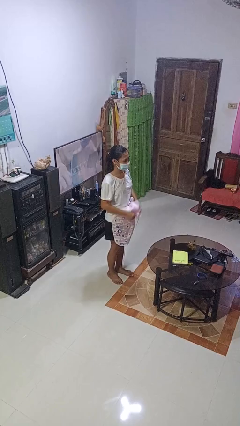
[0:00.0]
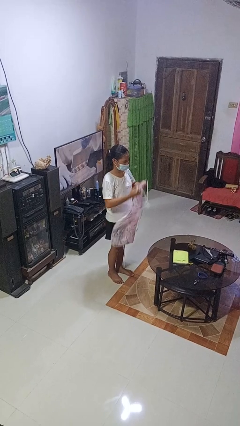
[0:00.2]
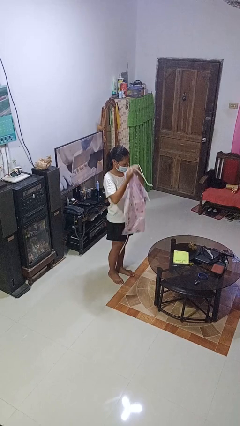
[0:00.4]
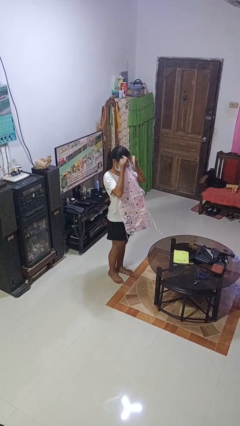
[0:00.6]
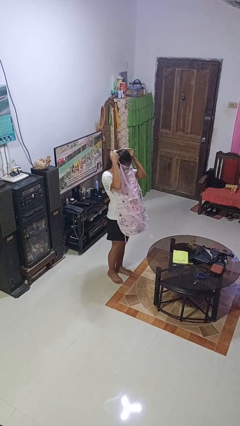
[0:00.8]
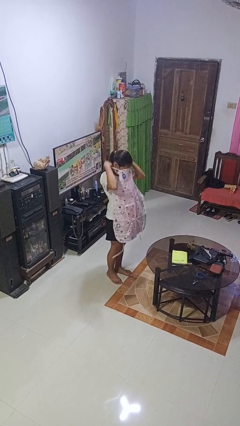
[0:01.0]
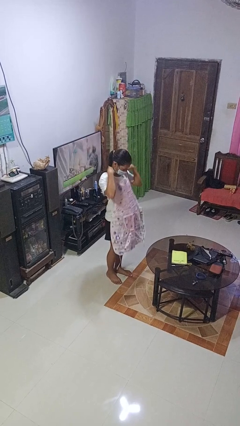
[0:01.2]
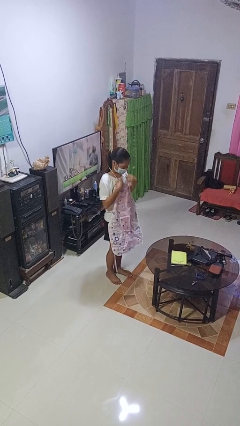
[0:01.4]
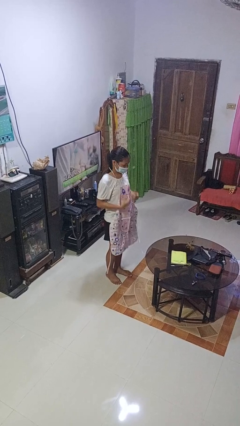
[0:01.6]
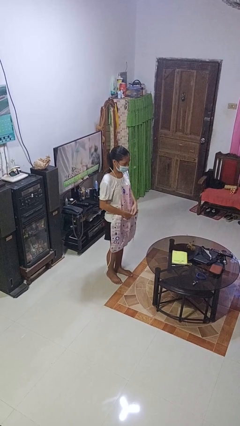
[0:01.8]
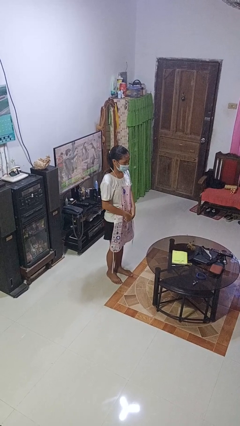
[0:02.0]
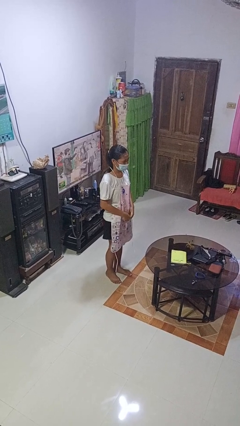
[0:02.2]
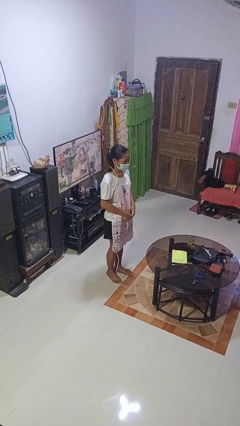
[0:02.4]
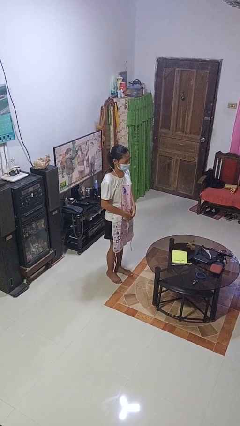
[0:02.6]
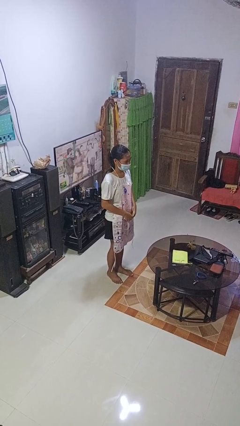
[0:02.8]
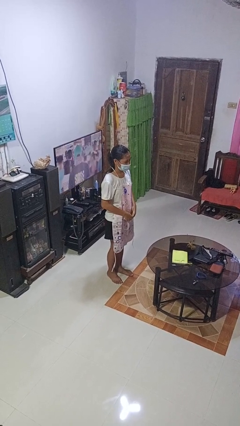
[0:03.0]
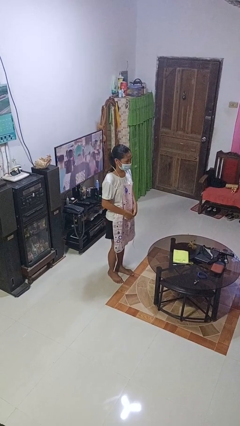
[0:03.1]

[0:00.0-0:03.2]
person puts on apron

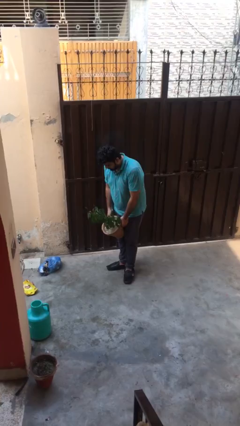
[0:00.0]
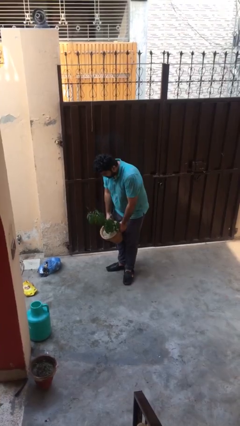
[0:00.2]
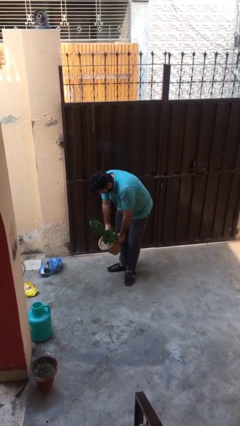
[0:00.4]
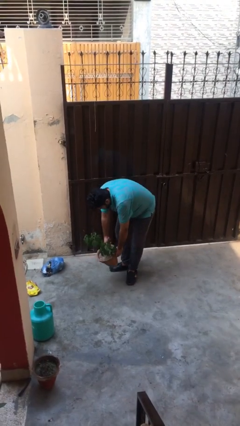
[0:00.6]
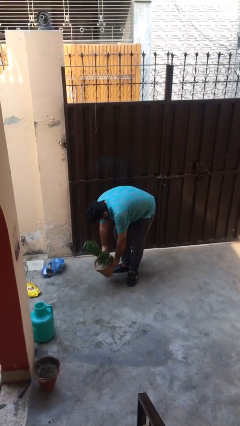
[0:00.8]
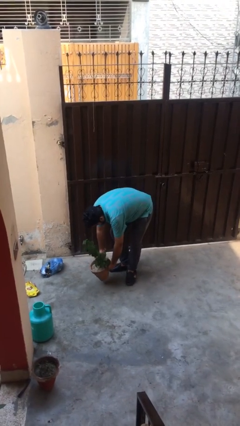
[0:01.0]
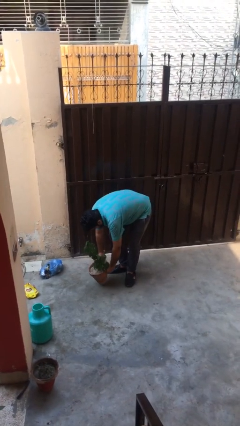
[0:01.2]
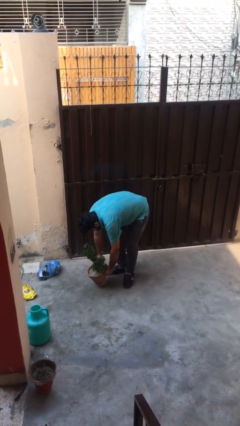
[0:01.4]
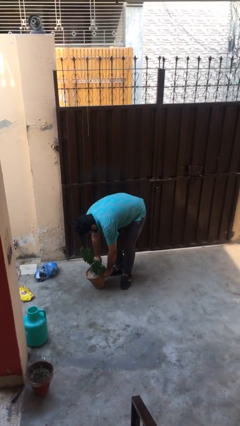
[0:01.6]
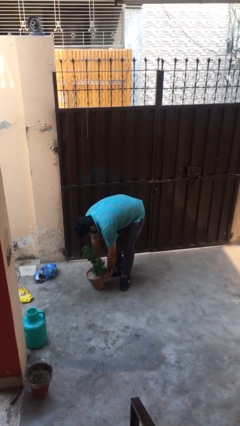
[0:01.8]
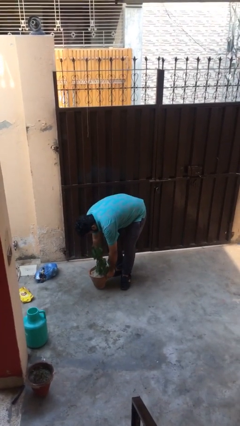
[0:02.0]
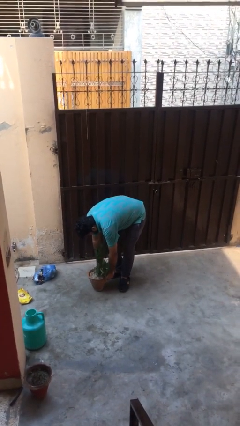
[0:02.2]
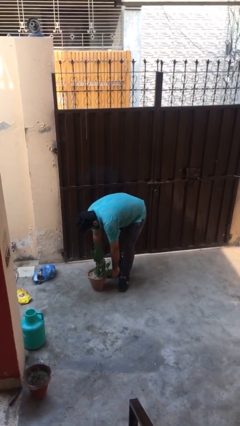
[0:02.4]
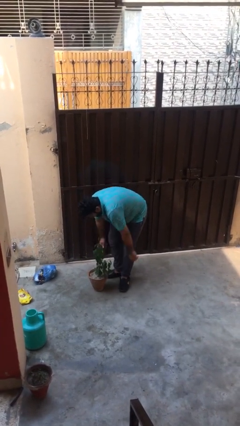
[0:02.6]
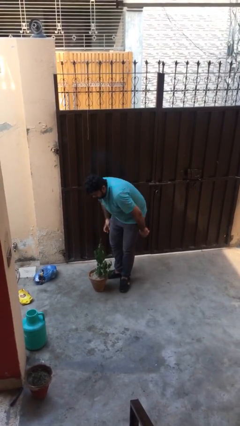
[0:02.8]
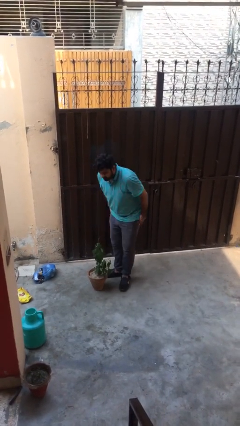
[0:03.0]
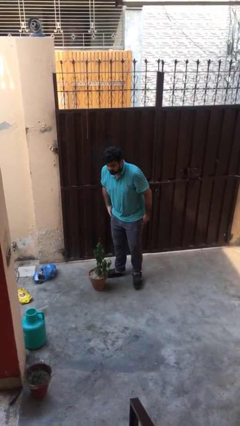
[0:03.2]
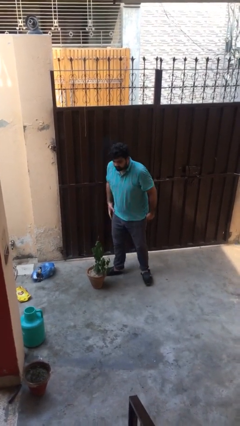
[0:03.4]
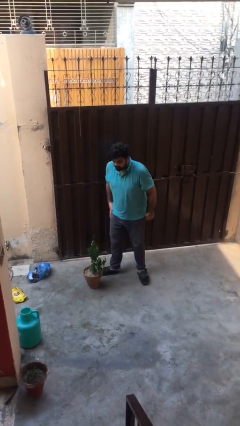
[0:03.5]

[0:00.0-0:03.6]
person puts down object on floor

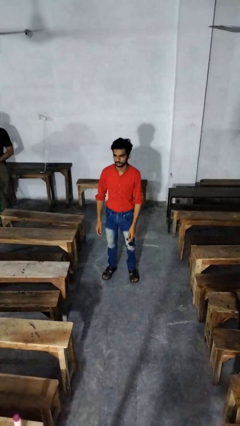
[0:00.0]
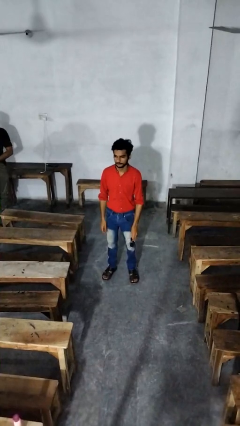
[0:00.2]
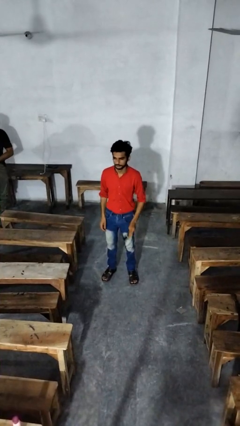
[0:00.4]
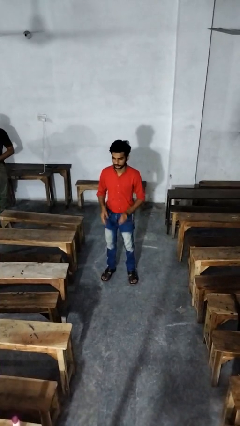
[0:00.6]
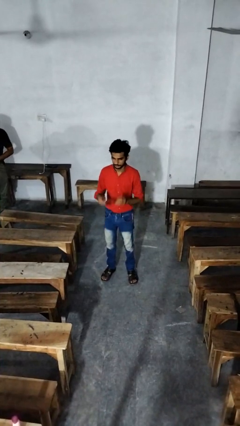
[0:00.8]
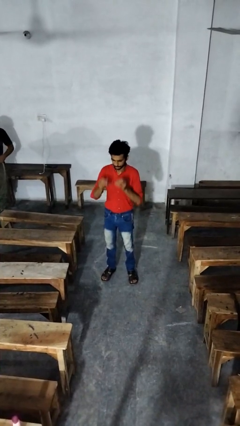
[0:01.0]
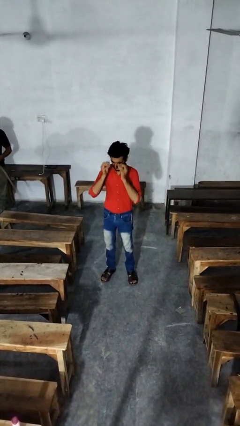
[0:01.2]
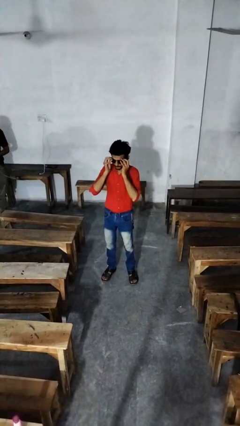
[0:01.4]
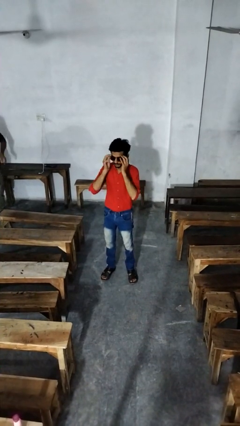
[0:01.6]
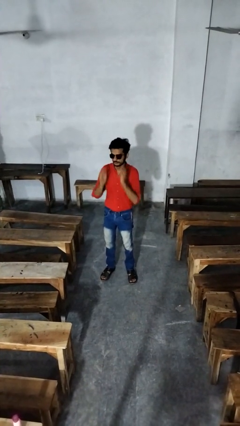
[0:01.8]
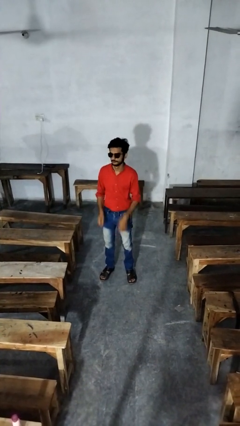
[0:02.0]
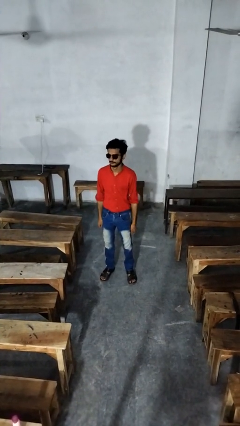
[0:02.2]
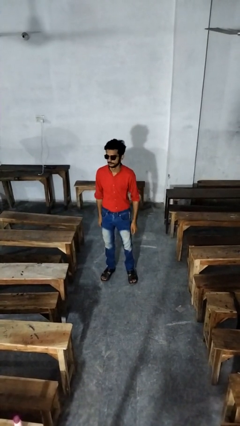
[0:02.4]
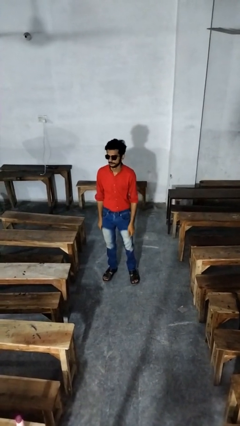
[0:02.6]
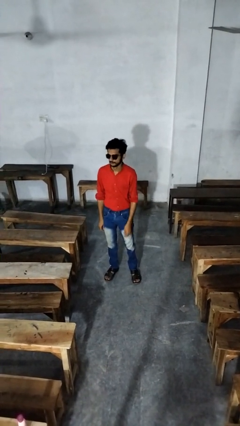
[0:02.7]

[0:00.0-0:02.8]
person puts on sunglasses

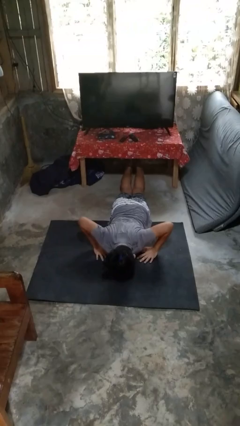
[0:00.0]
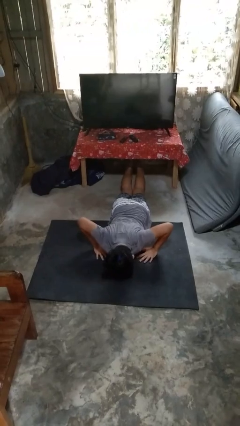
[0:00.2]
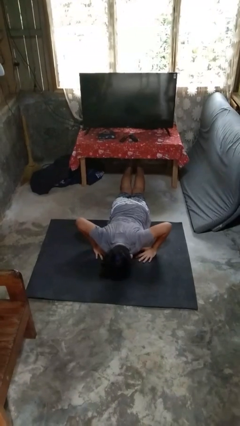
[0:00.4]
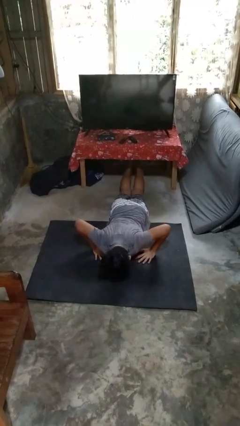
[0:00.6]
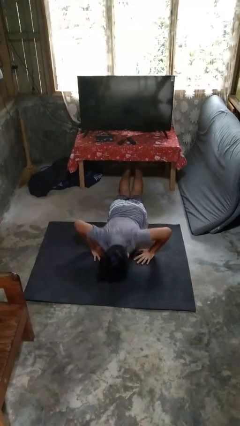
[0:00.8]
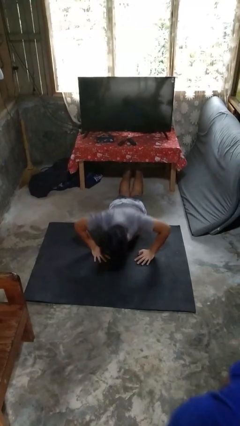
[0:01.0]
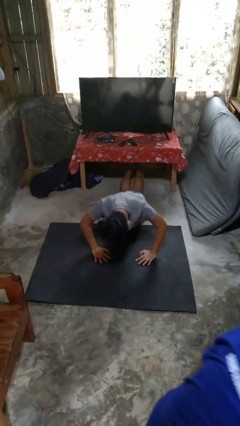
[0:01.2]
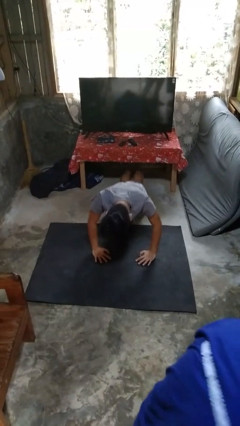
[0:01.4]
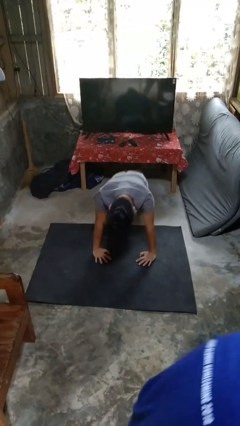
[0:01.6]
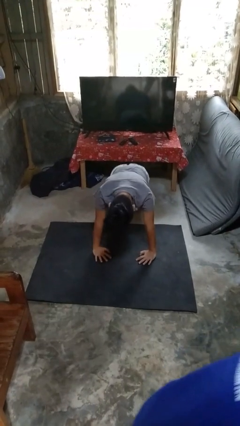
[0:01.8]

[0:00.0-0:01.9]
person exercises with pushup

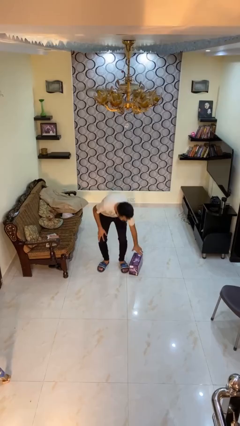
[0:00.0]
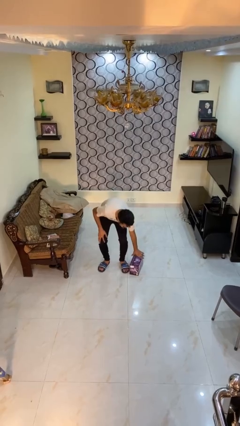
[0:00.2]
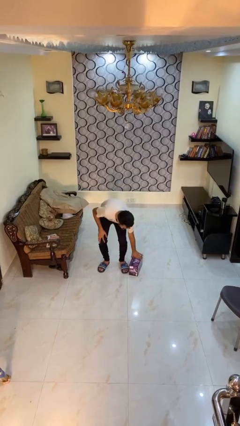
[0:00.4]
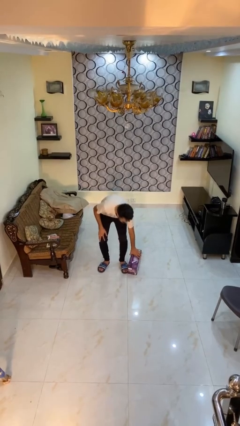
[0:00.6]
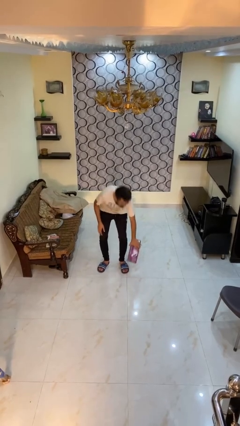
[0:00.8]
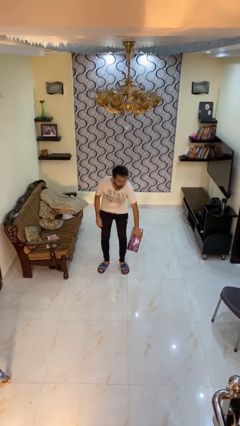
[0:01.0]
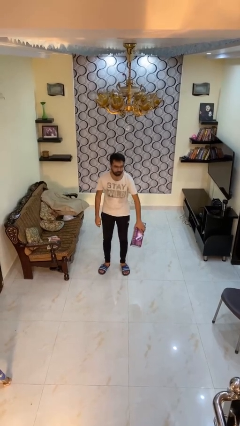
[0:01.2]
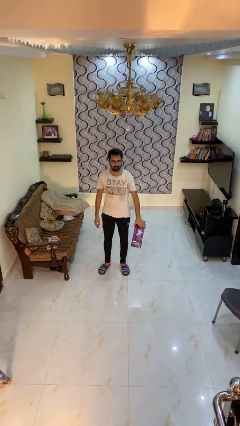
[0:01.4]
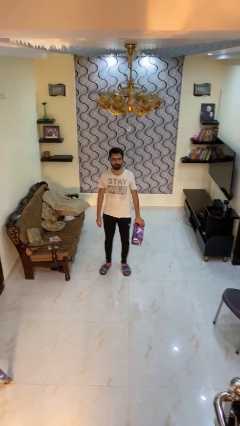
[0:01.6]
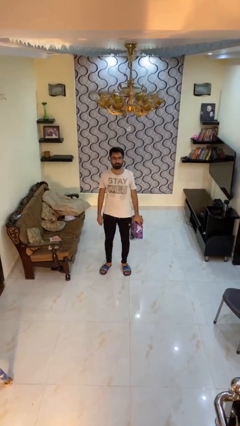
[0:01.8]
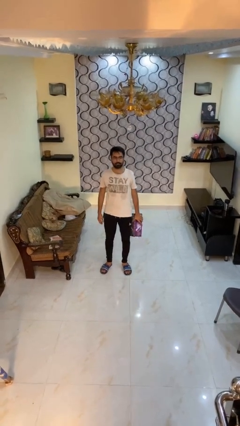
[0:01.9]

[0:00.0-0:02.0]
person picks up object from floor

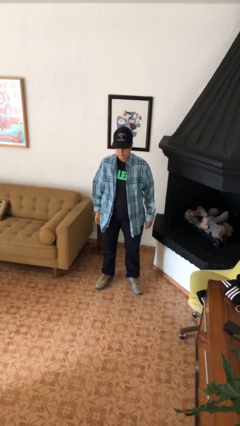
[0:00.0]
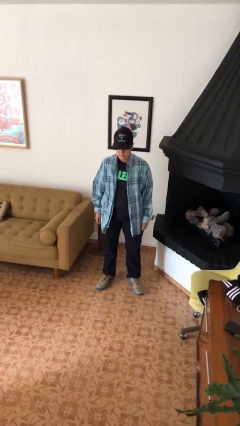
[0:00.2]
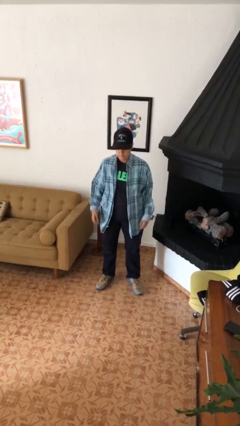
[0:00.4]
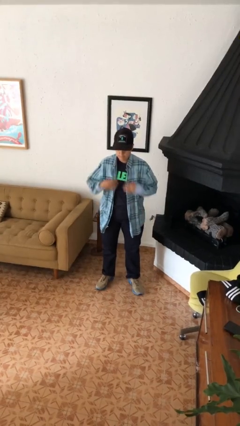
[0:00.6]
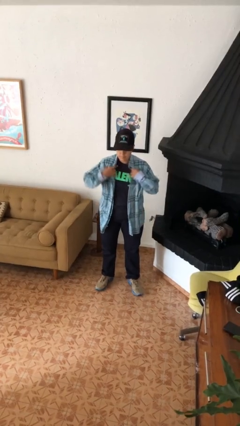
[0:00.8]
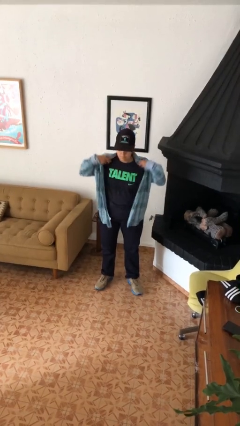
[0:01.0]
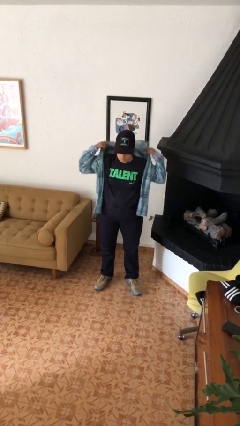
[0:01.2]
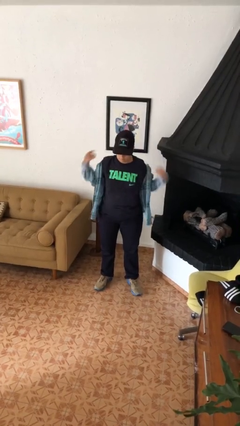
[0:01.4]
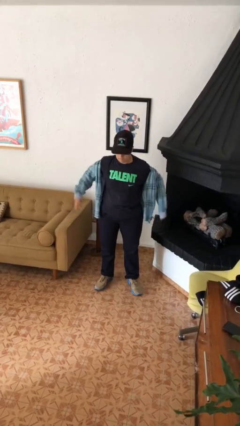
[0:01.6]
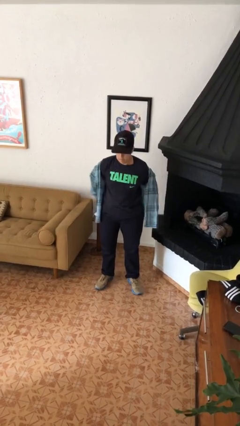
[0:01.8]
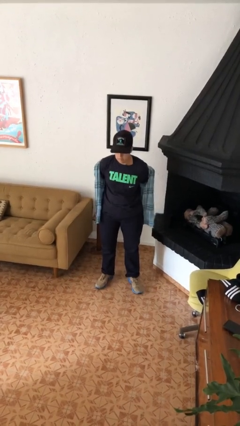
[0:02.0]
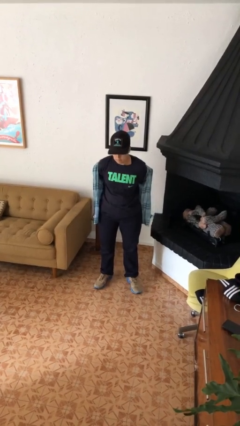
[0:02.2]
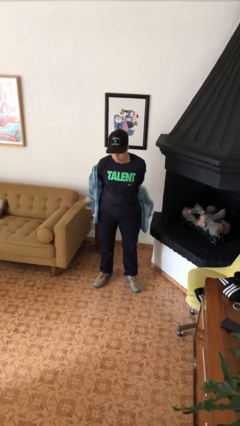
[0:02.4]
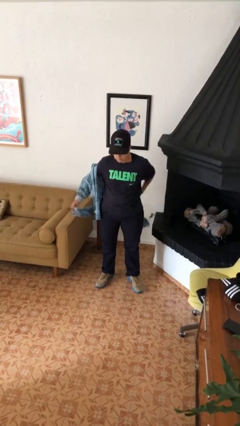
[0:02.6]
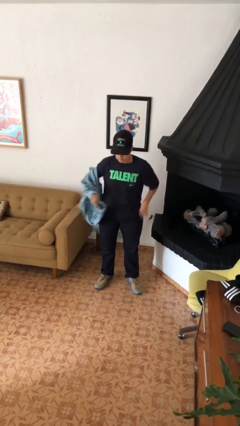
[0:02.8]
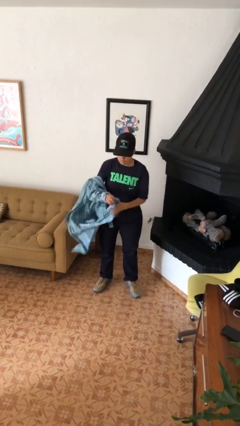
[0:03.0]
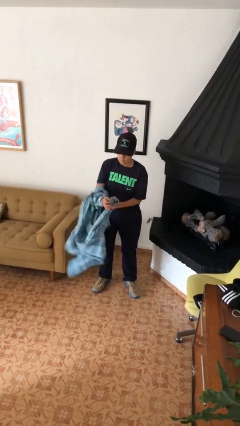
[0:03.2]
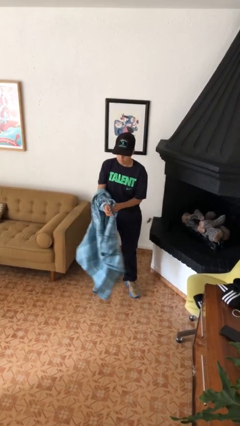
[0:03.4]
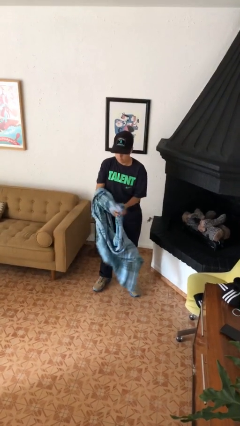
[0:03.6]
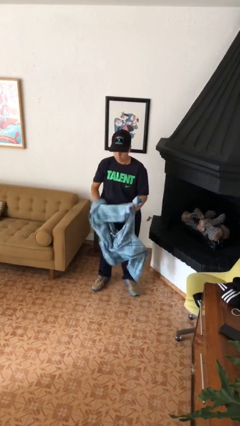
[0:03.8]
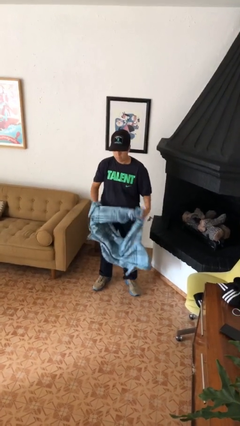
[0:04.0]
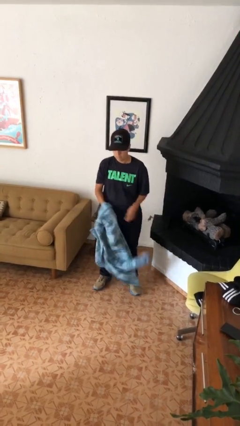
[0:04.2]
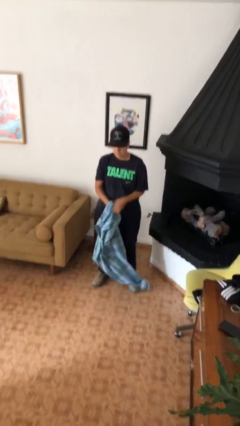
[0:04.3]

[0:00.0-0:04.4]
person takes off shirt
